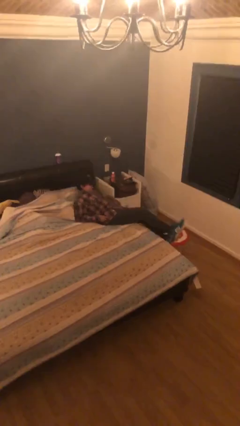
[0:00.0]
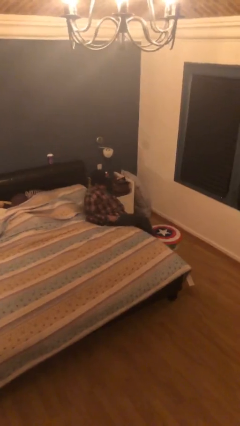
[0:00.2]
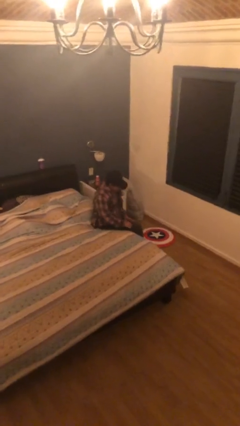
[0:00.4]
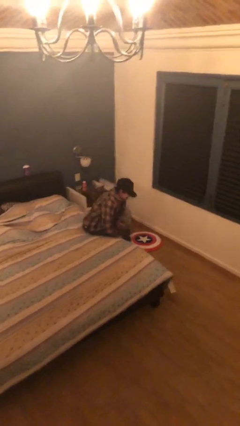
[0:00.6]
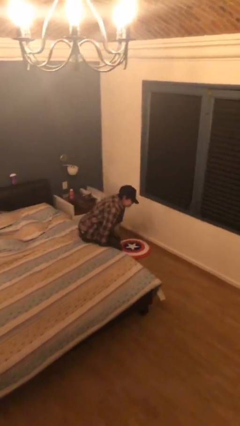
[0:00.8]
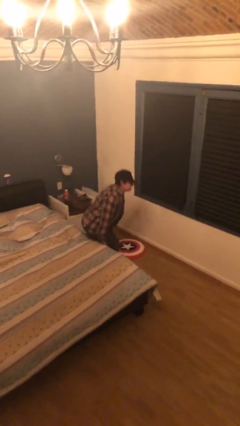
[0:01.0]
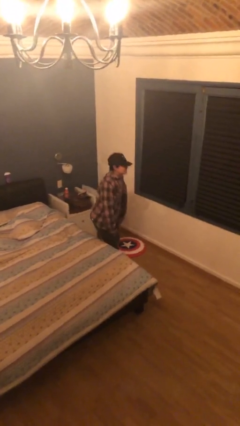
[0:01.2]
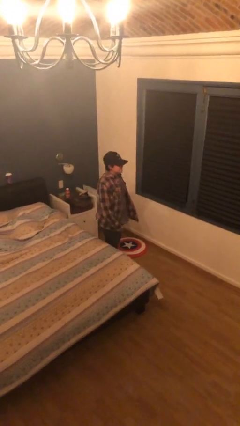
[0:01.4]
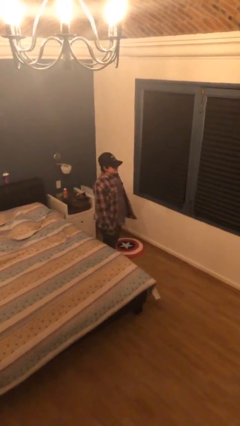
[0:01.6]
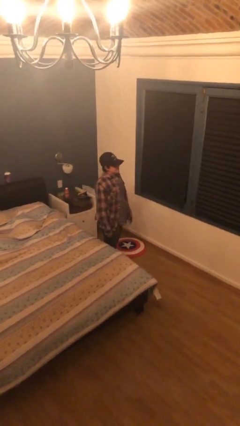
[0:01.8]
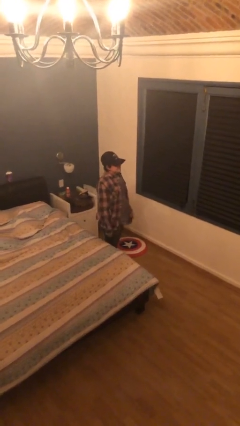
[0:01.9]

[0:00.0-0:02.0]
person stands up

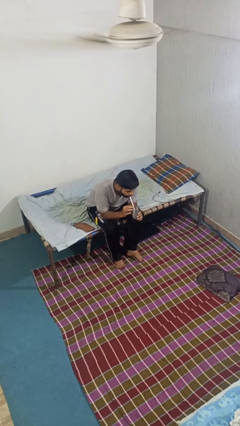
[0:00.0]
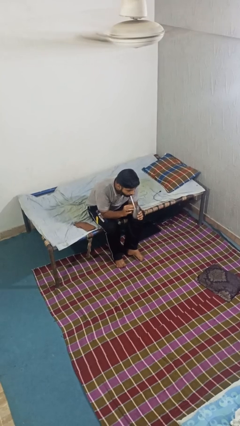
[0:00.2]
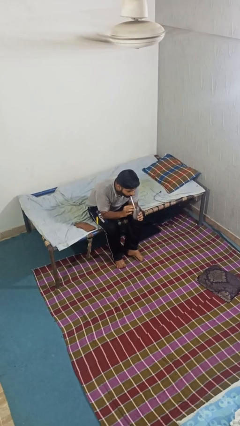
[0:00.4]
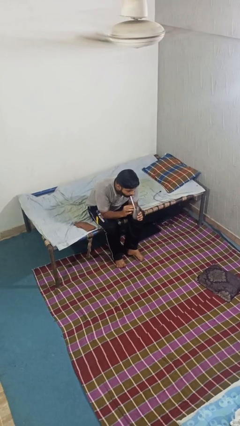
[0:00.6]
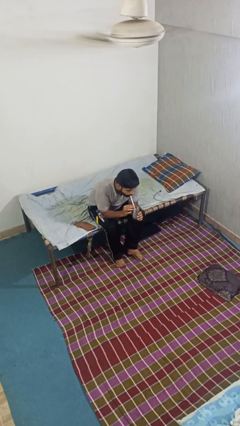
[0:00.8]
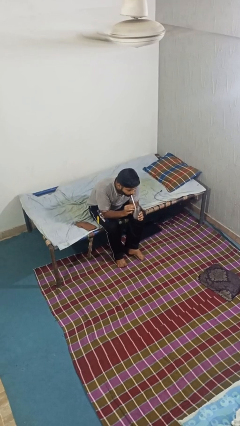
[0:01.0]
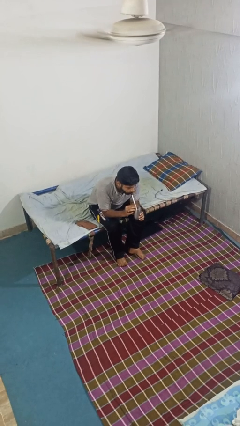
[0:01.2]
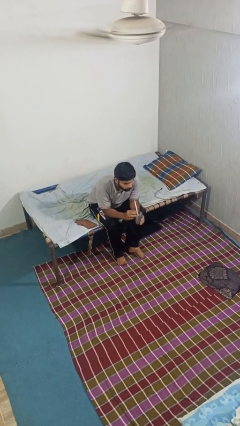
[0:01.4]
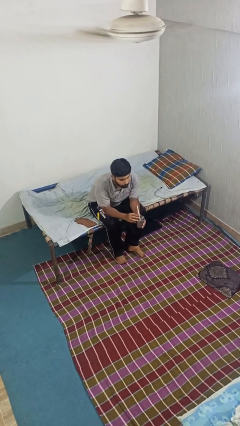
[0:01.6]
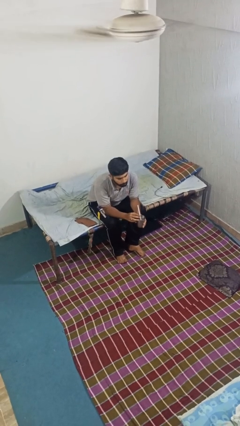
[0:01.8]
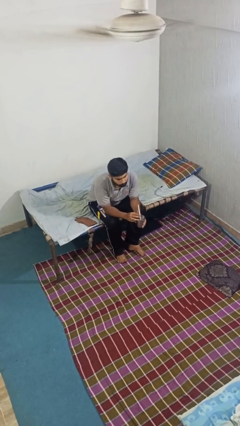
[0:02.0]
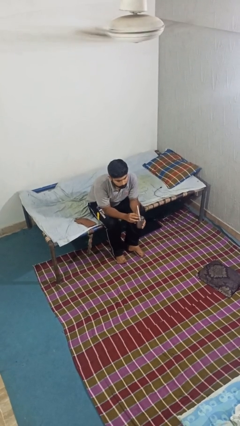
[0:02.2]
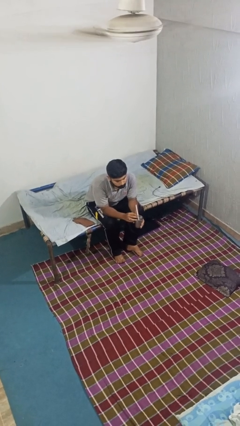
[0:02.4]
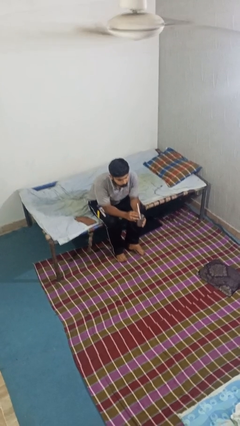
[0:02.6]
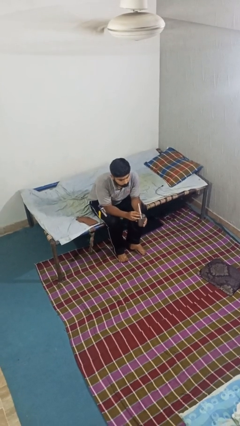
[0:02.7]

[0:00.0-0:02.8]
person drinks from straw

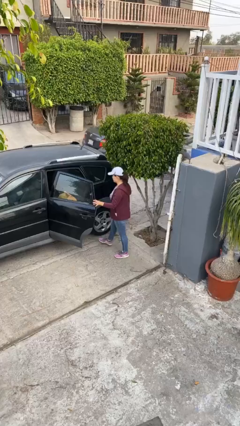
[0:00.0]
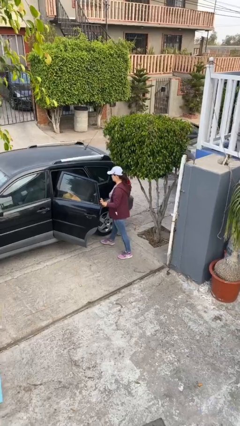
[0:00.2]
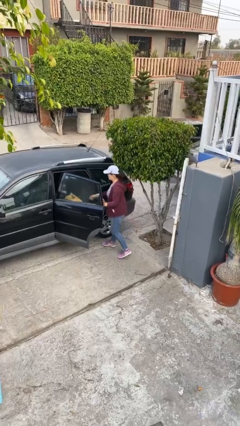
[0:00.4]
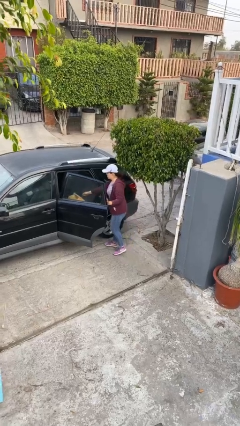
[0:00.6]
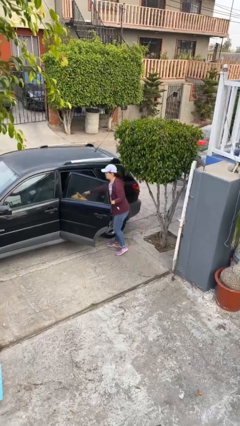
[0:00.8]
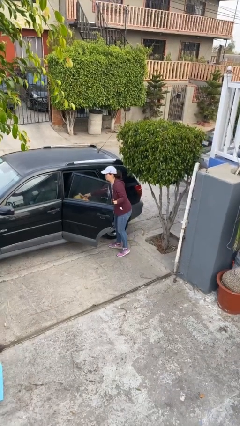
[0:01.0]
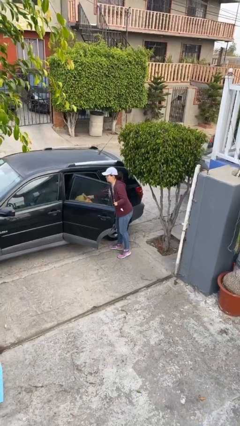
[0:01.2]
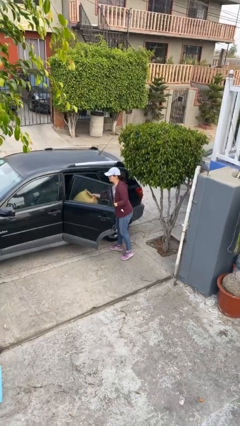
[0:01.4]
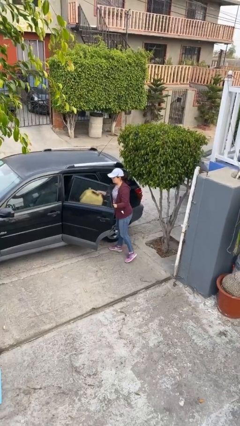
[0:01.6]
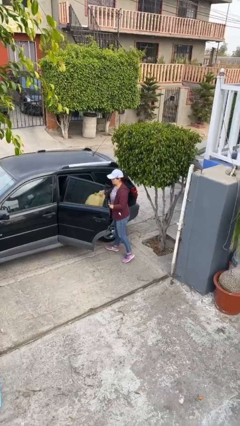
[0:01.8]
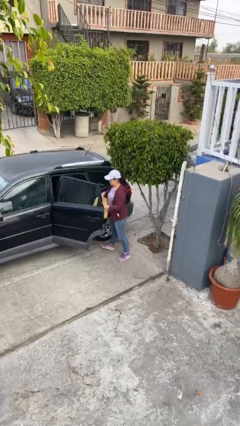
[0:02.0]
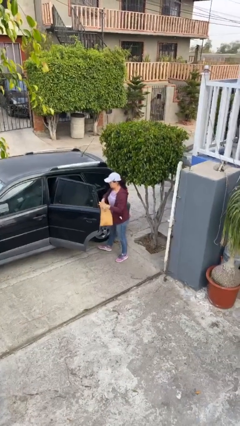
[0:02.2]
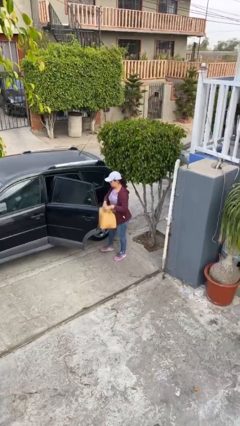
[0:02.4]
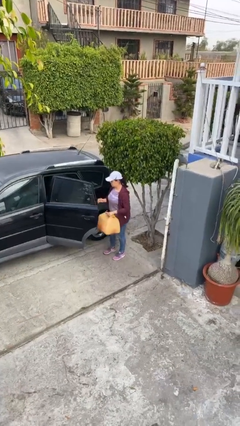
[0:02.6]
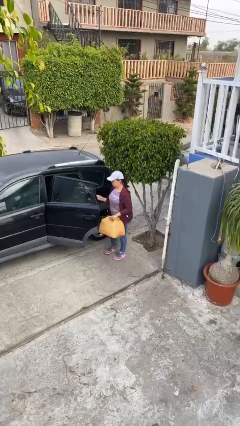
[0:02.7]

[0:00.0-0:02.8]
person unloads car

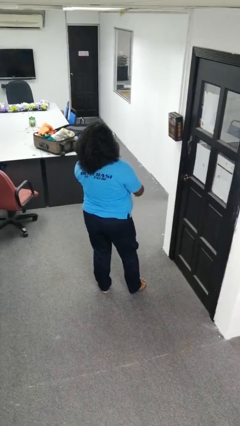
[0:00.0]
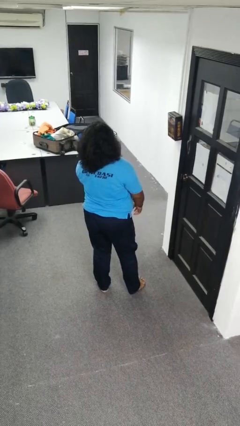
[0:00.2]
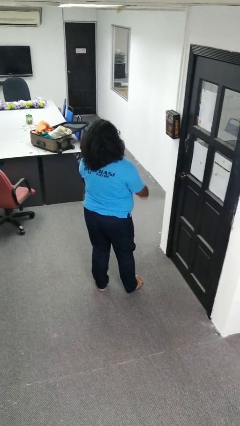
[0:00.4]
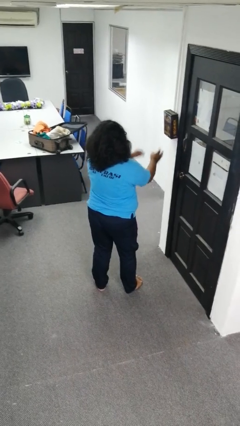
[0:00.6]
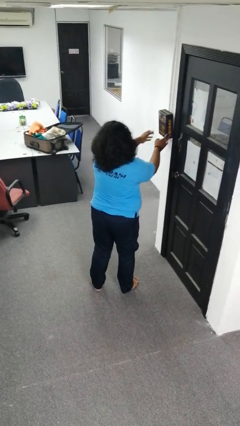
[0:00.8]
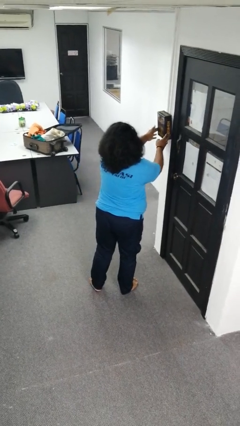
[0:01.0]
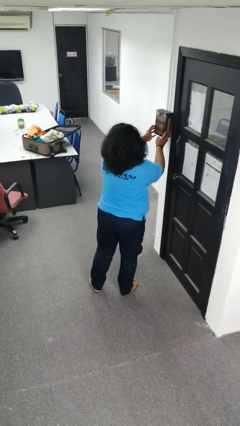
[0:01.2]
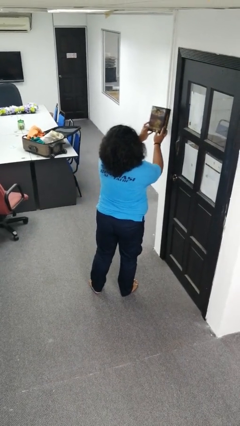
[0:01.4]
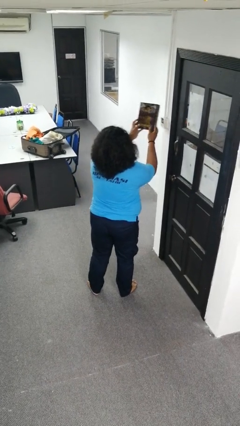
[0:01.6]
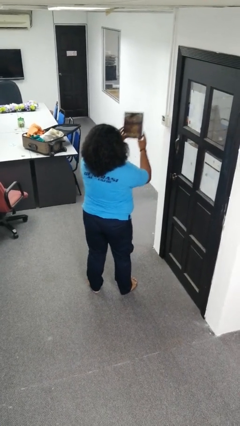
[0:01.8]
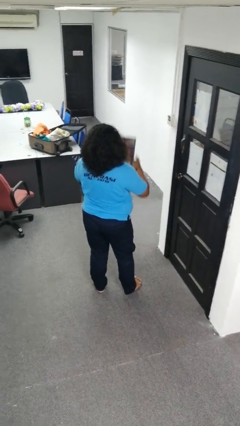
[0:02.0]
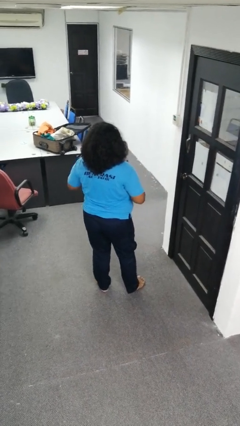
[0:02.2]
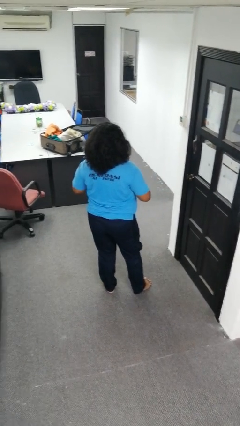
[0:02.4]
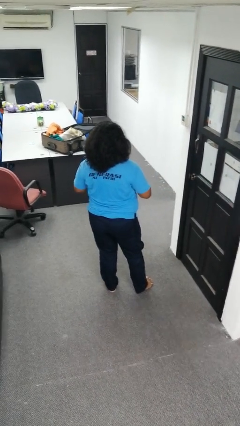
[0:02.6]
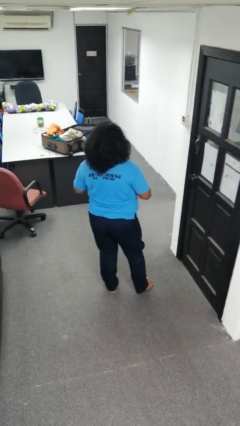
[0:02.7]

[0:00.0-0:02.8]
person takes down picture frame

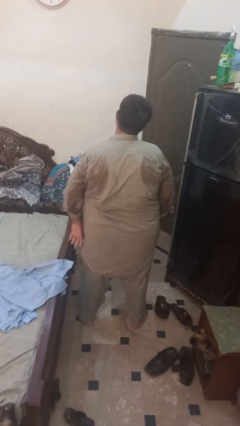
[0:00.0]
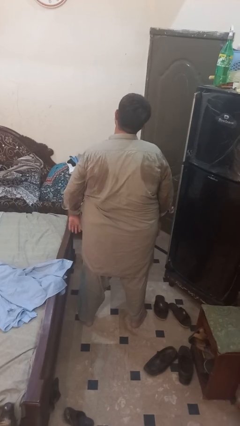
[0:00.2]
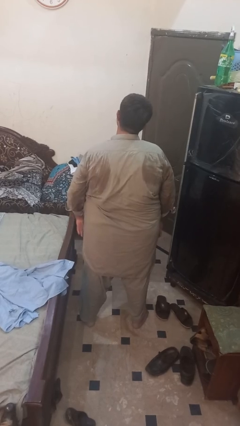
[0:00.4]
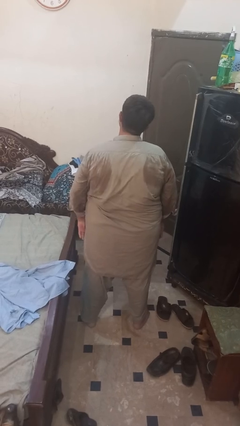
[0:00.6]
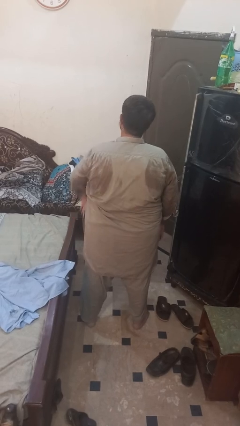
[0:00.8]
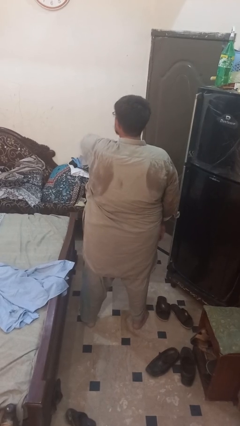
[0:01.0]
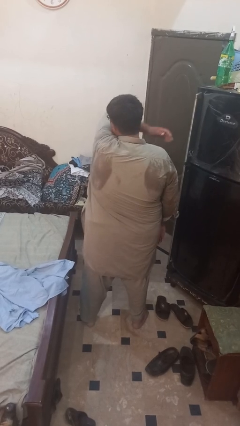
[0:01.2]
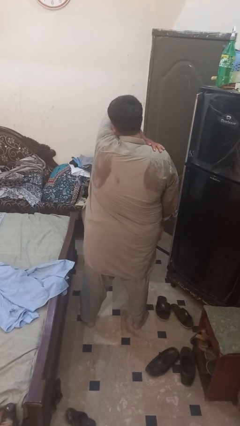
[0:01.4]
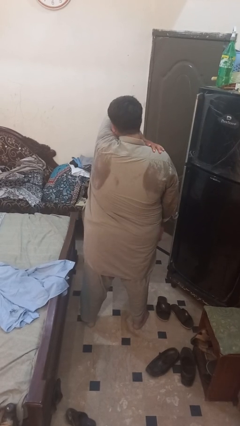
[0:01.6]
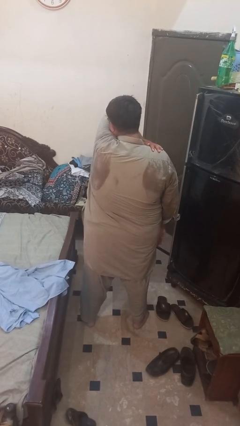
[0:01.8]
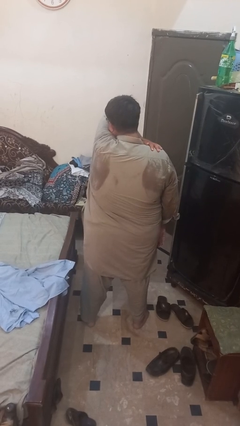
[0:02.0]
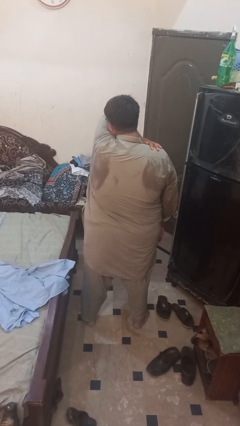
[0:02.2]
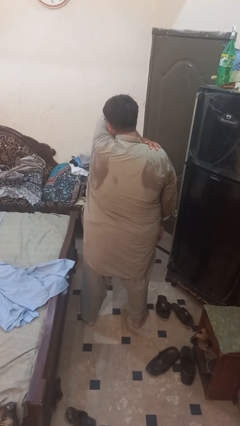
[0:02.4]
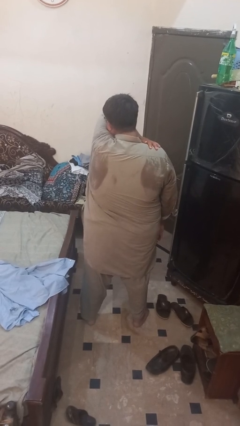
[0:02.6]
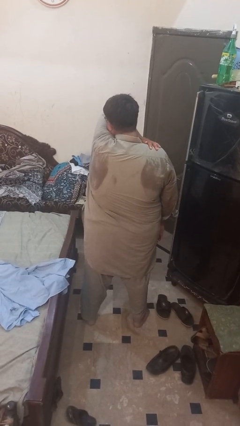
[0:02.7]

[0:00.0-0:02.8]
person sneezes into arm

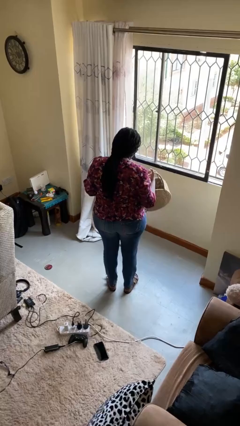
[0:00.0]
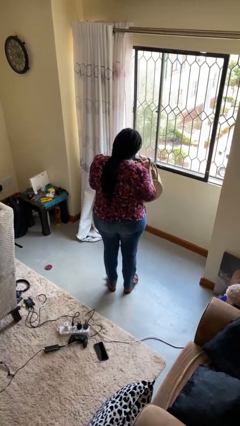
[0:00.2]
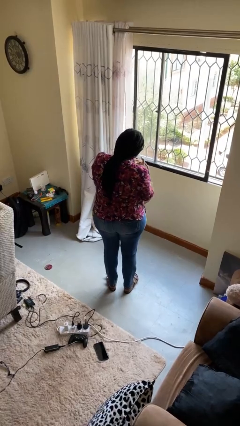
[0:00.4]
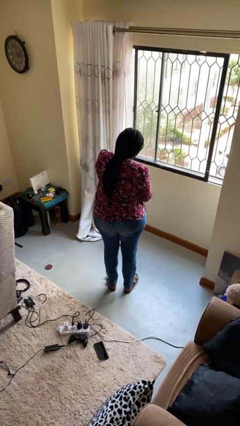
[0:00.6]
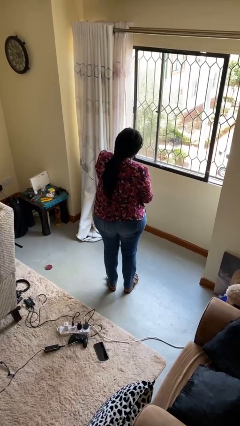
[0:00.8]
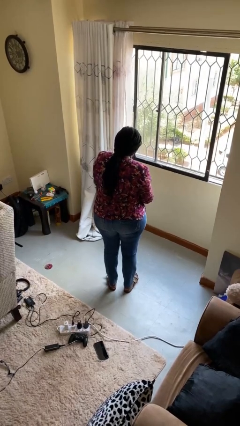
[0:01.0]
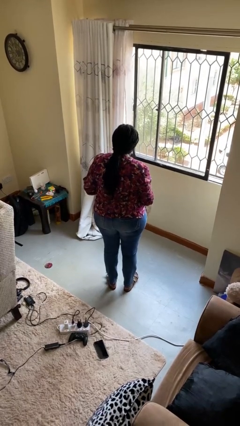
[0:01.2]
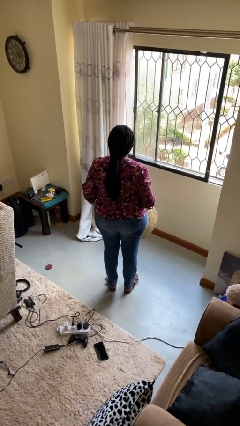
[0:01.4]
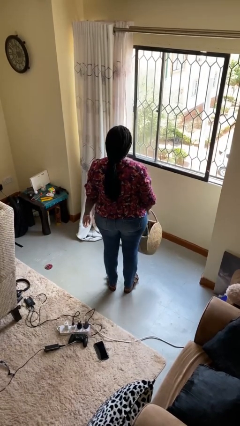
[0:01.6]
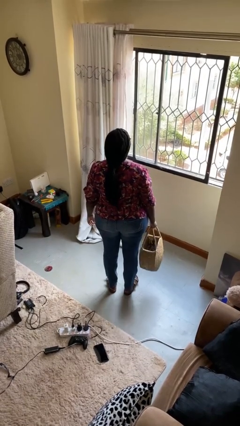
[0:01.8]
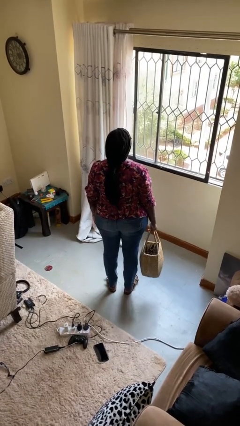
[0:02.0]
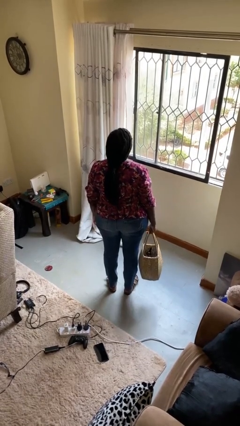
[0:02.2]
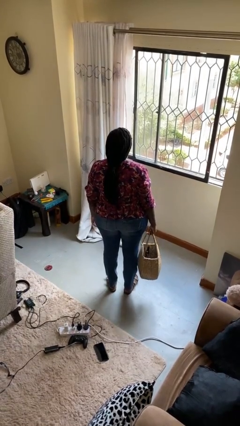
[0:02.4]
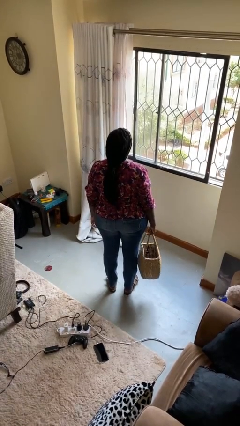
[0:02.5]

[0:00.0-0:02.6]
person puts object into basket

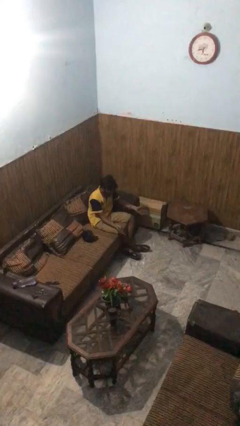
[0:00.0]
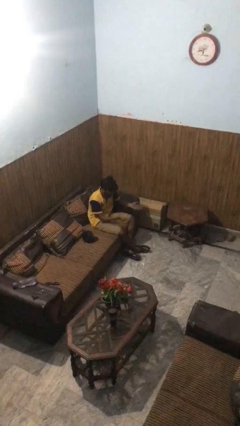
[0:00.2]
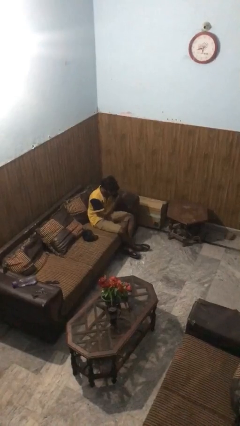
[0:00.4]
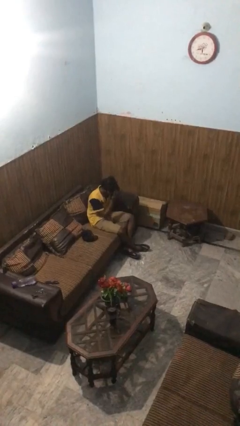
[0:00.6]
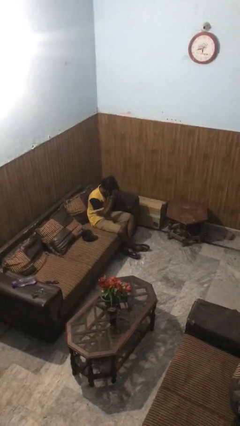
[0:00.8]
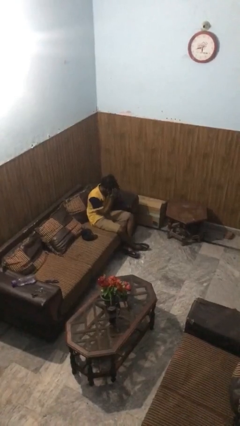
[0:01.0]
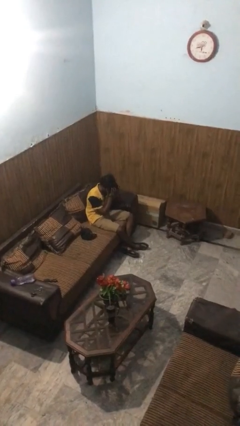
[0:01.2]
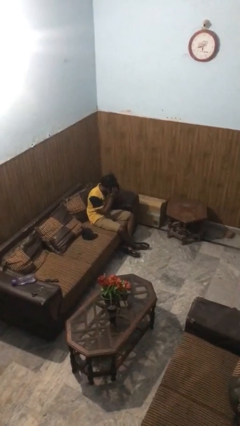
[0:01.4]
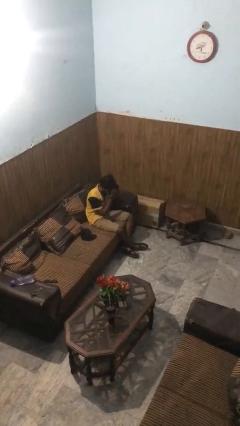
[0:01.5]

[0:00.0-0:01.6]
person covers face with hands
